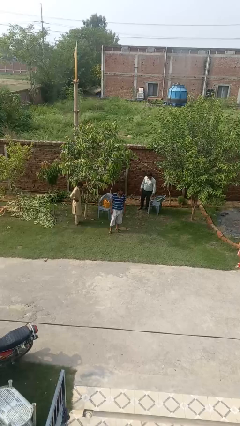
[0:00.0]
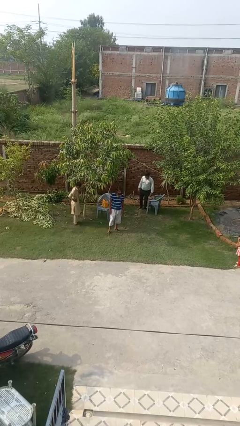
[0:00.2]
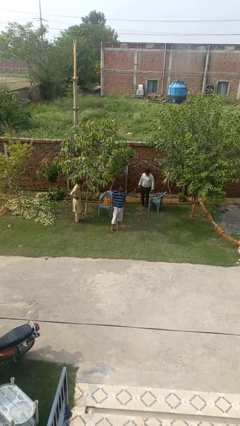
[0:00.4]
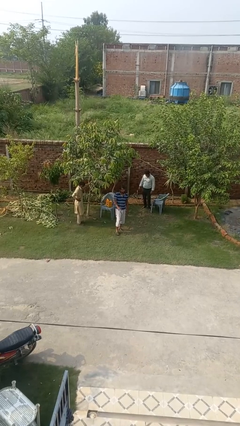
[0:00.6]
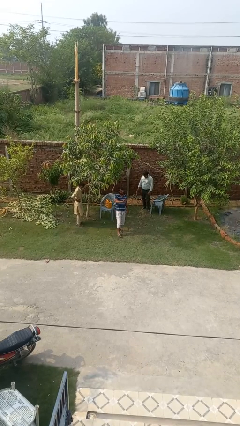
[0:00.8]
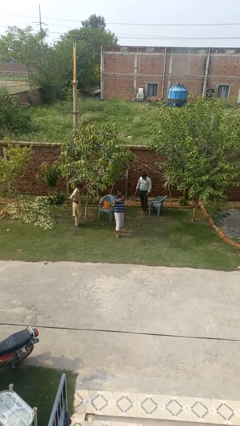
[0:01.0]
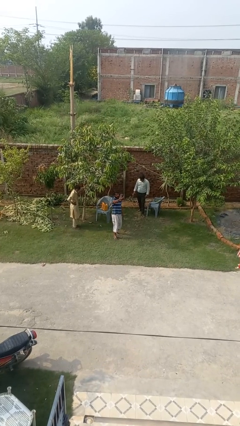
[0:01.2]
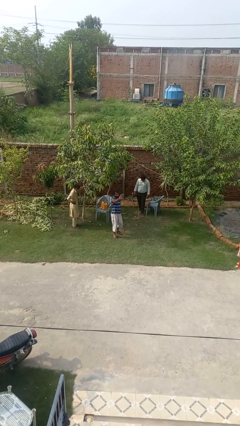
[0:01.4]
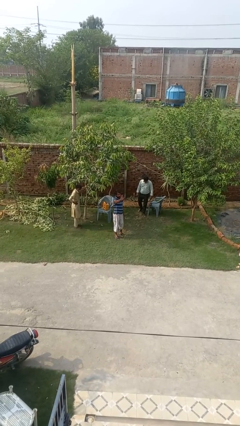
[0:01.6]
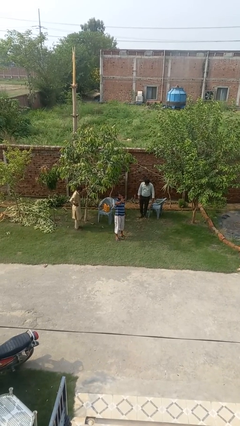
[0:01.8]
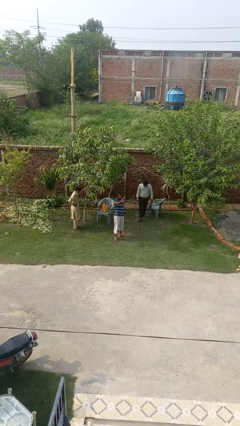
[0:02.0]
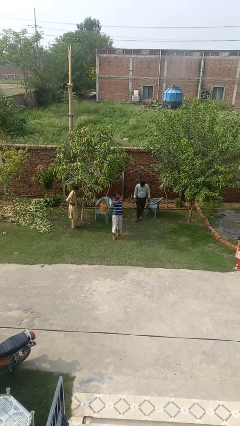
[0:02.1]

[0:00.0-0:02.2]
person waves at person

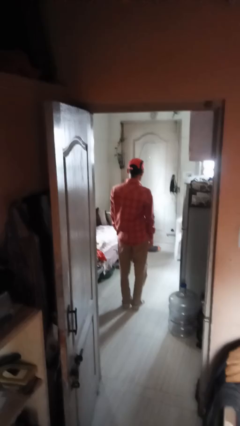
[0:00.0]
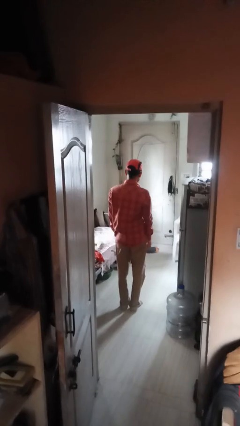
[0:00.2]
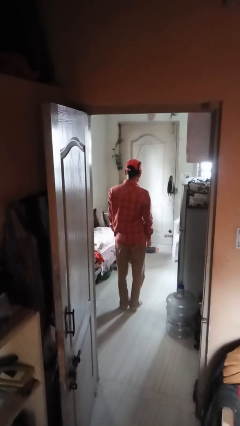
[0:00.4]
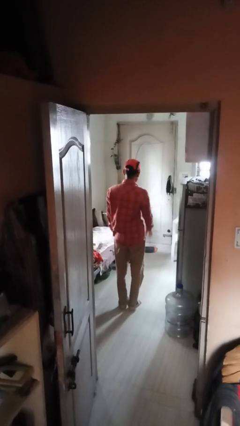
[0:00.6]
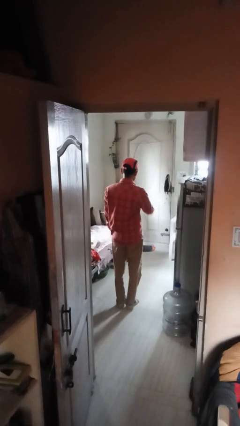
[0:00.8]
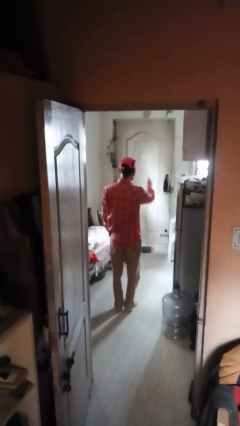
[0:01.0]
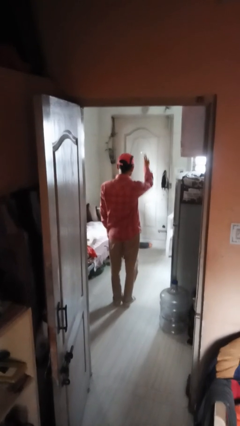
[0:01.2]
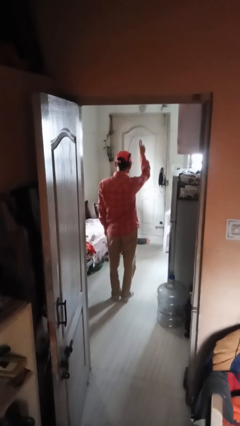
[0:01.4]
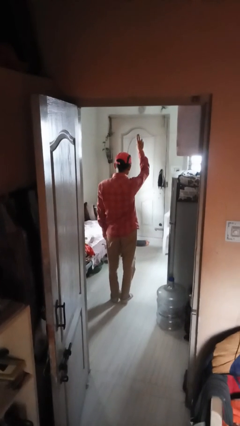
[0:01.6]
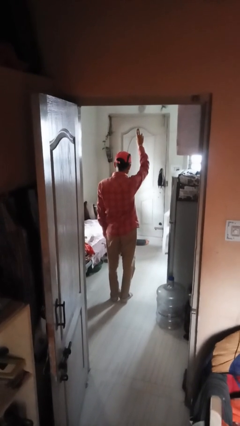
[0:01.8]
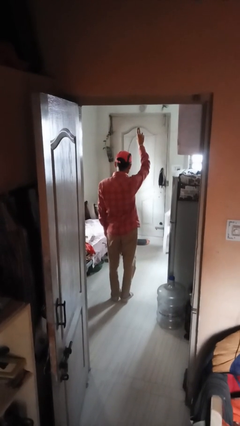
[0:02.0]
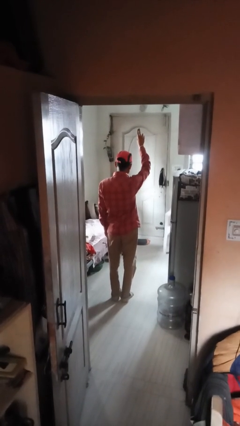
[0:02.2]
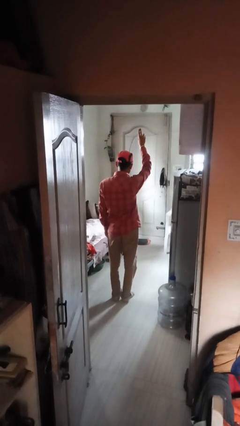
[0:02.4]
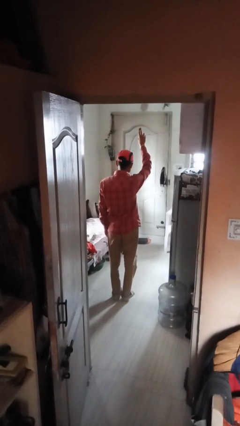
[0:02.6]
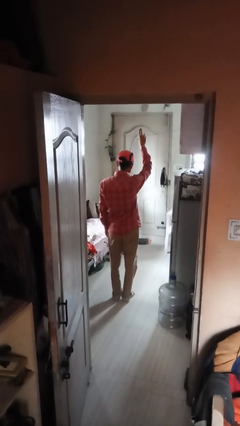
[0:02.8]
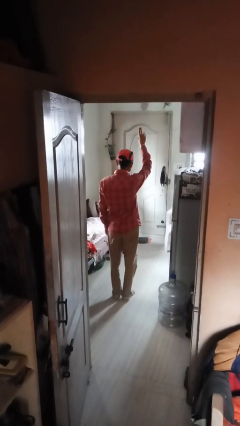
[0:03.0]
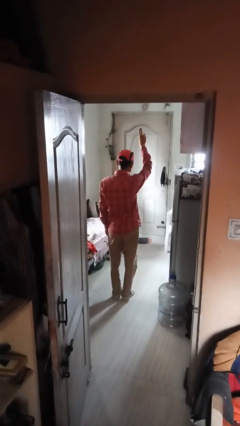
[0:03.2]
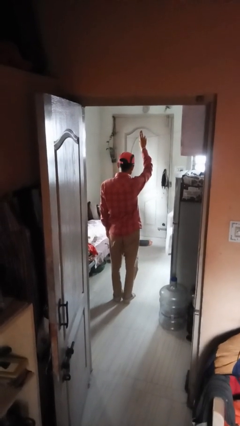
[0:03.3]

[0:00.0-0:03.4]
person gestures swipe up

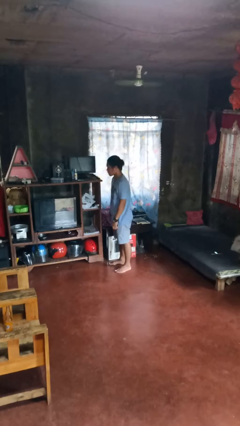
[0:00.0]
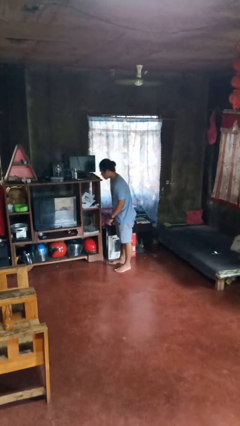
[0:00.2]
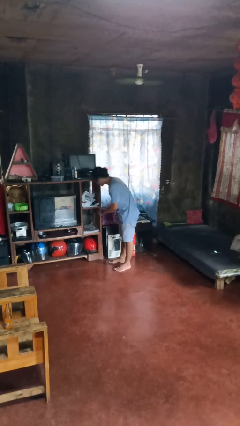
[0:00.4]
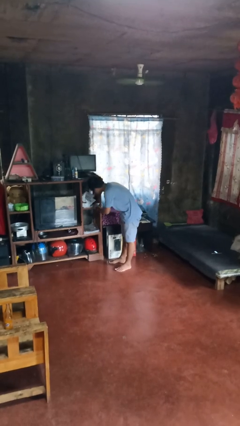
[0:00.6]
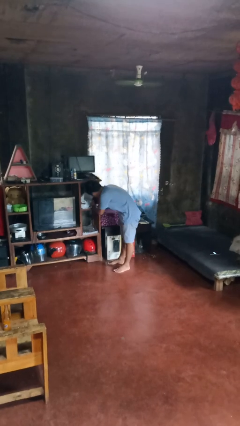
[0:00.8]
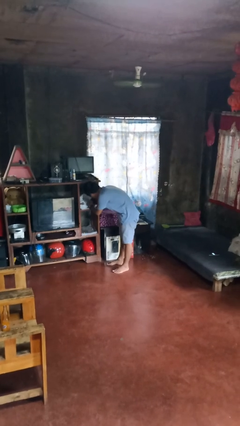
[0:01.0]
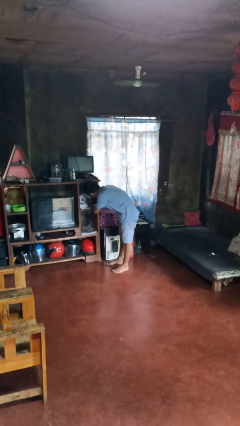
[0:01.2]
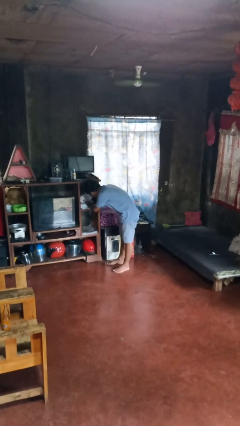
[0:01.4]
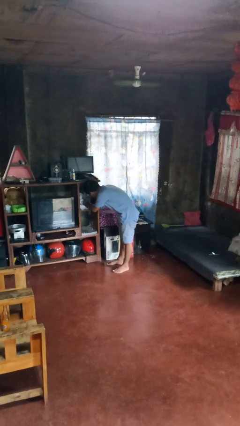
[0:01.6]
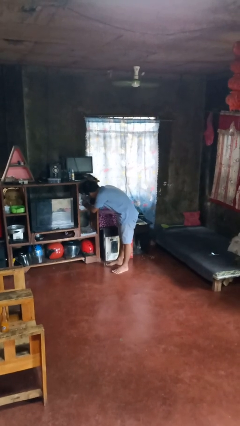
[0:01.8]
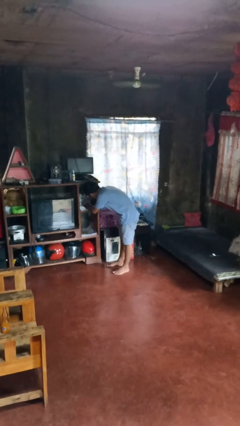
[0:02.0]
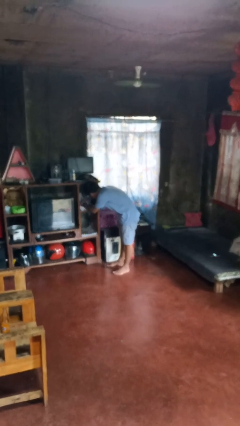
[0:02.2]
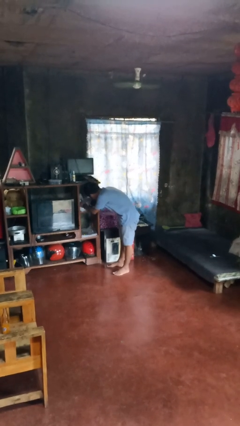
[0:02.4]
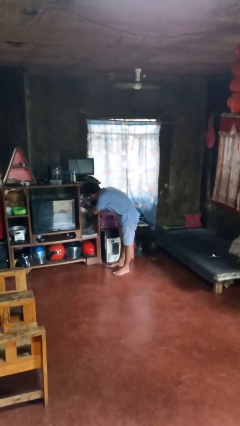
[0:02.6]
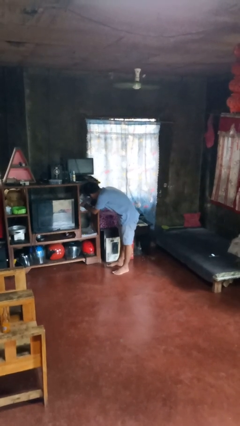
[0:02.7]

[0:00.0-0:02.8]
person searches in cabinet

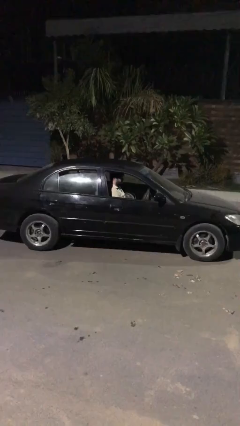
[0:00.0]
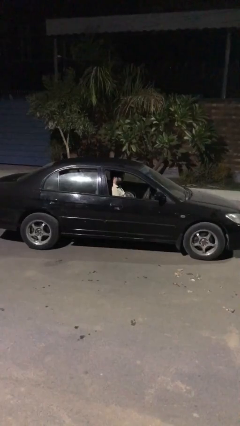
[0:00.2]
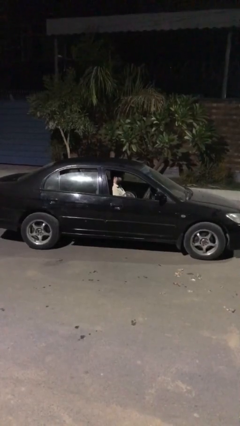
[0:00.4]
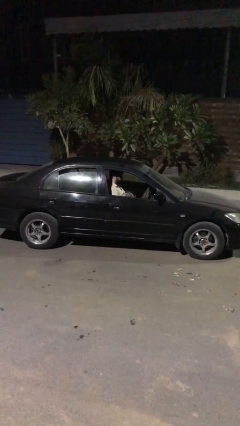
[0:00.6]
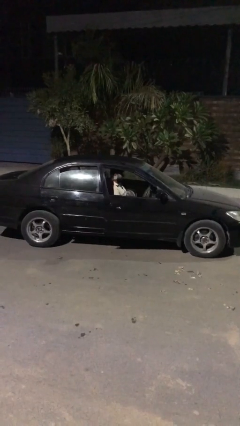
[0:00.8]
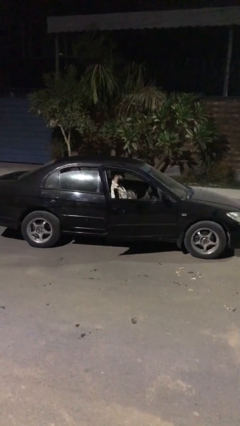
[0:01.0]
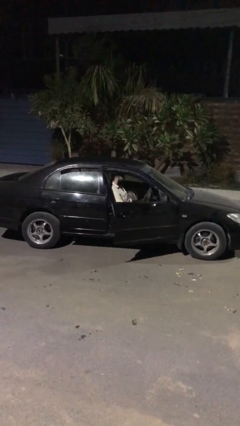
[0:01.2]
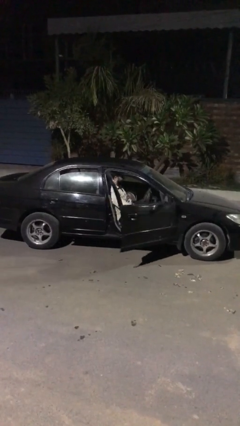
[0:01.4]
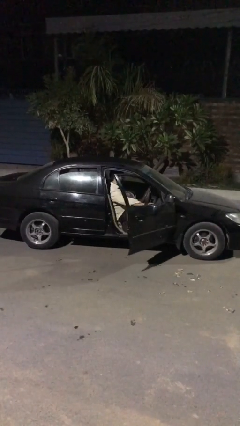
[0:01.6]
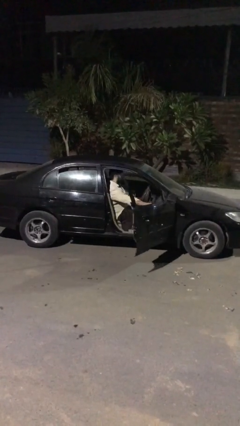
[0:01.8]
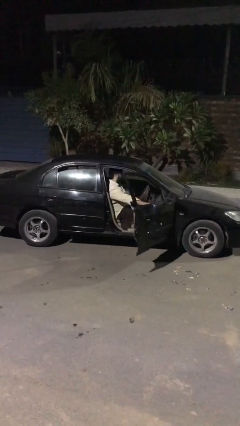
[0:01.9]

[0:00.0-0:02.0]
person opens car door

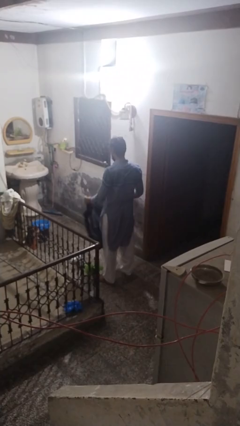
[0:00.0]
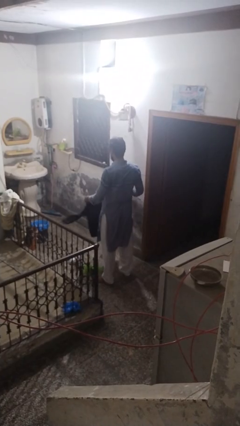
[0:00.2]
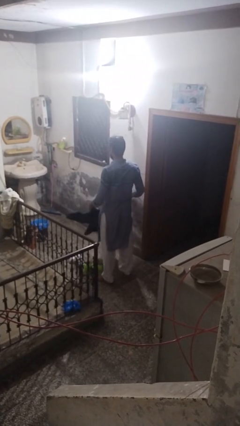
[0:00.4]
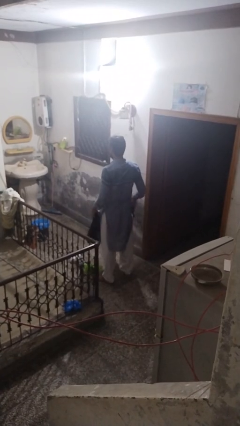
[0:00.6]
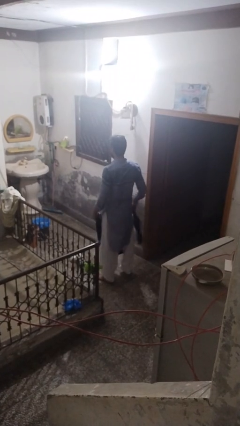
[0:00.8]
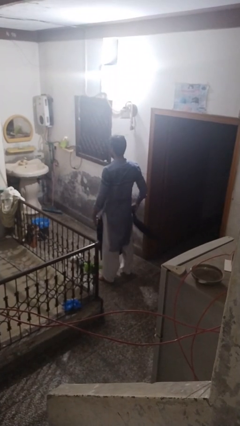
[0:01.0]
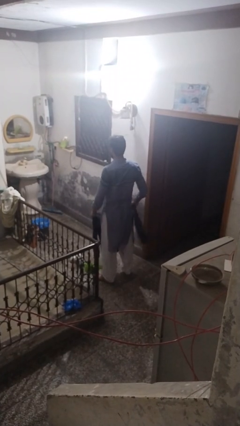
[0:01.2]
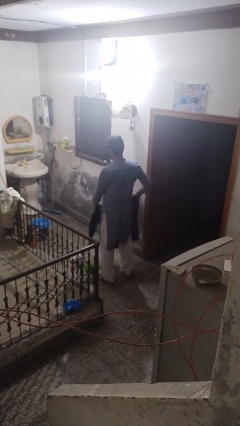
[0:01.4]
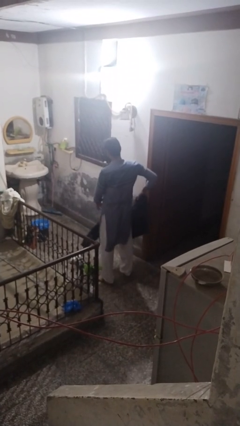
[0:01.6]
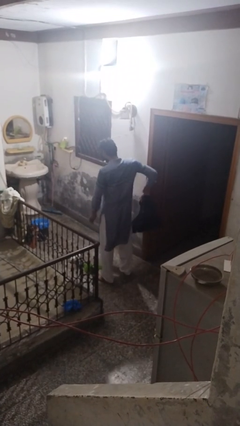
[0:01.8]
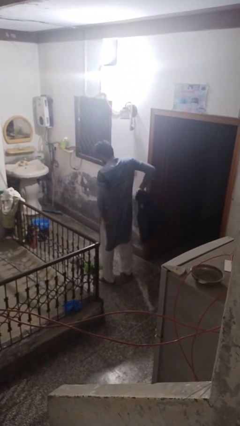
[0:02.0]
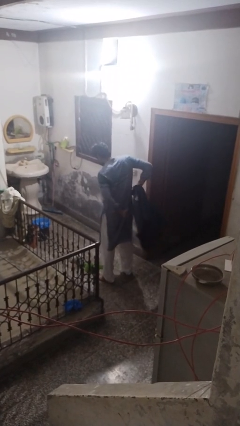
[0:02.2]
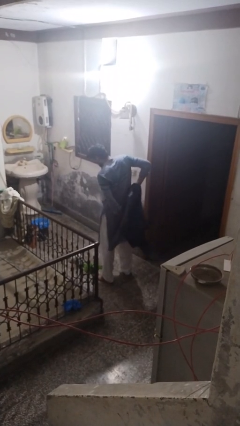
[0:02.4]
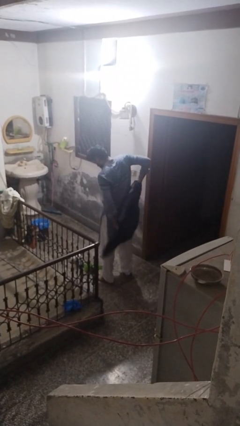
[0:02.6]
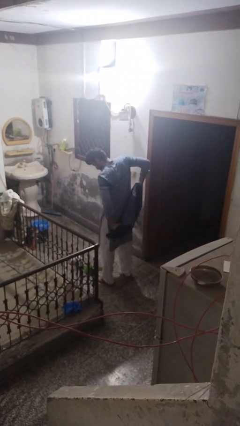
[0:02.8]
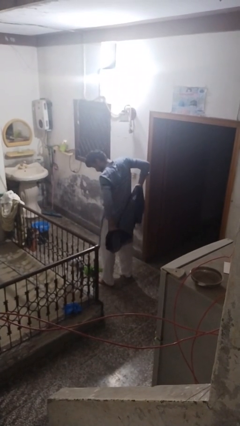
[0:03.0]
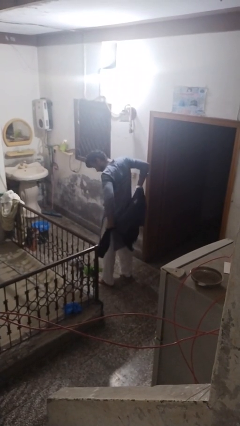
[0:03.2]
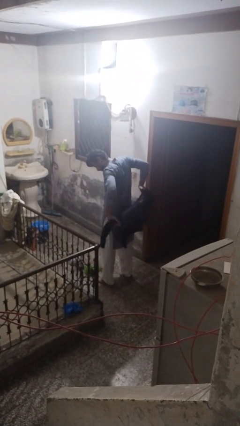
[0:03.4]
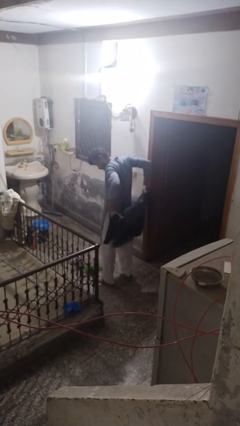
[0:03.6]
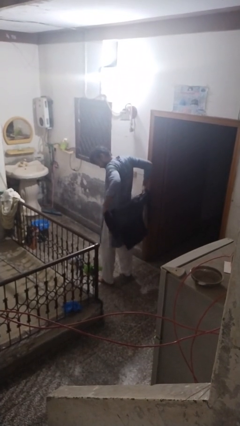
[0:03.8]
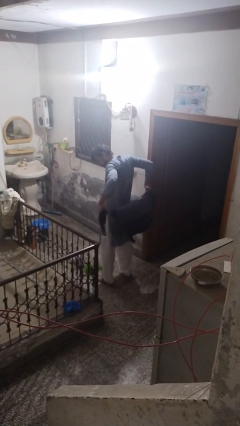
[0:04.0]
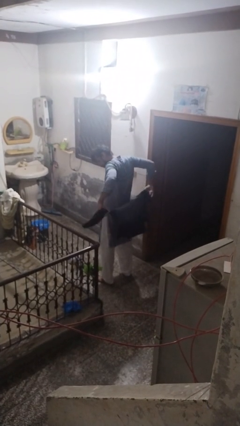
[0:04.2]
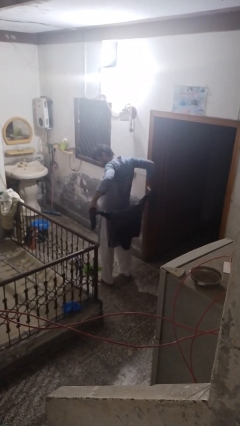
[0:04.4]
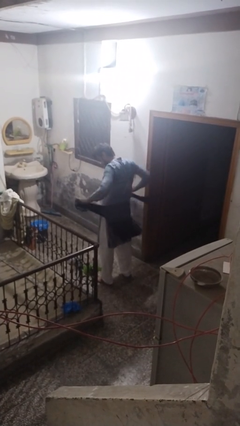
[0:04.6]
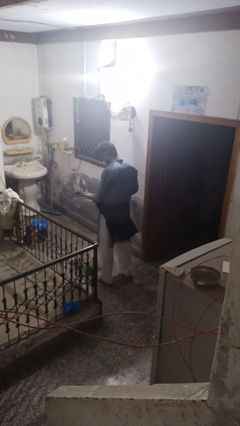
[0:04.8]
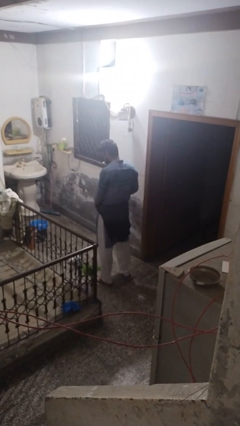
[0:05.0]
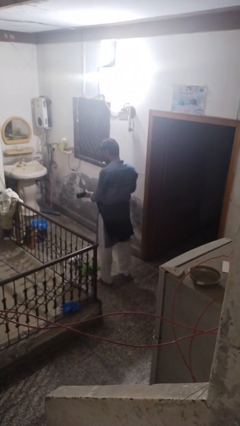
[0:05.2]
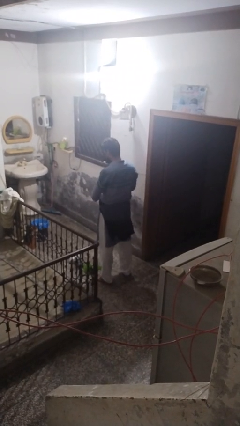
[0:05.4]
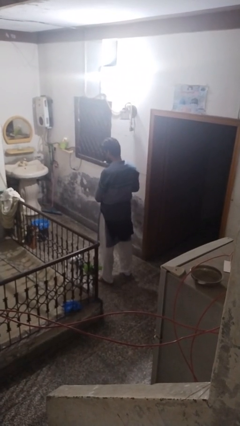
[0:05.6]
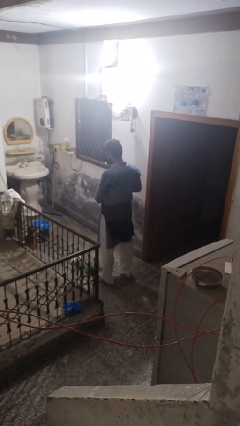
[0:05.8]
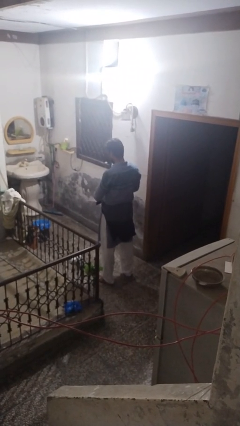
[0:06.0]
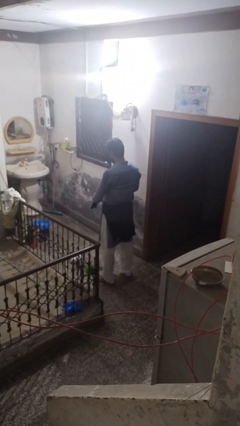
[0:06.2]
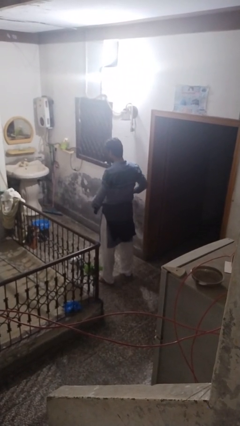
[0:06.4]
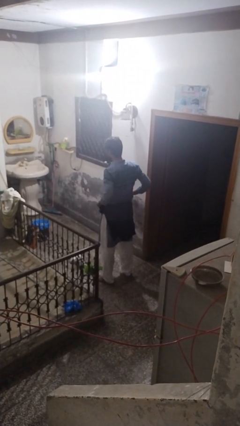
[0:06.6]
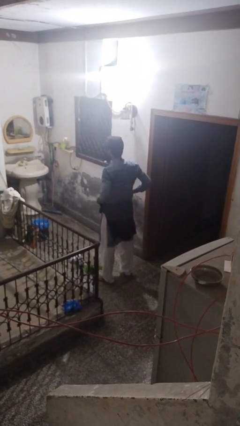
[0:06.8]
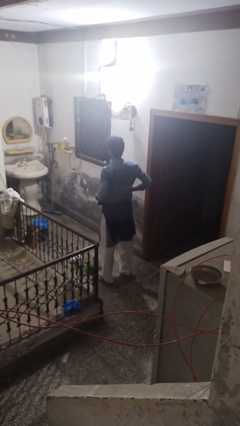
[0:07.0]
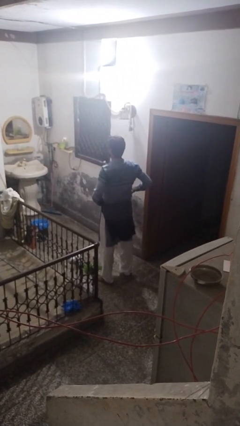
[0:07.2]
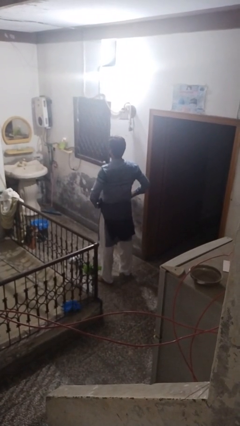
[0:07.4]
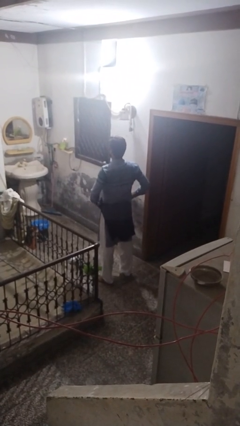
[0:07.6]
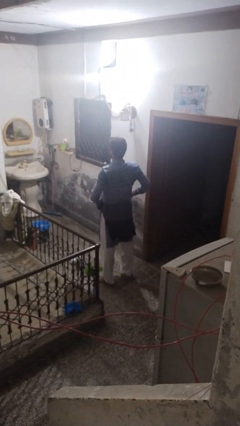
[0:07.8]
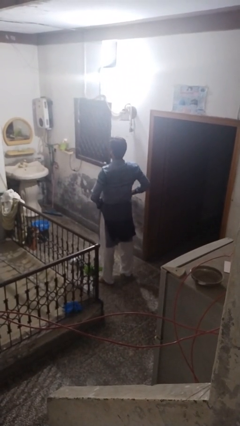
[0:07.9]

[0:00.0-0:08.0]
person ties jacket around waist
